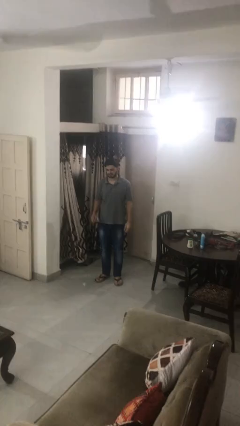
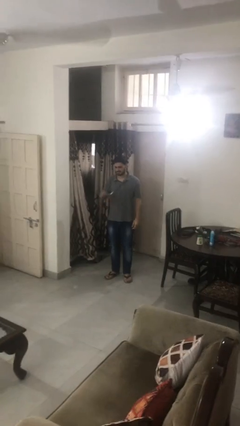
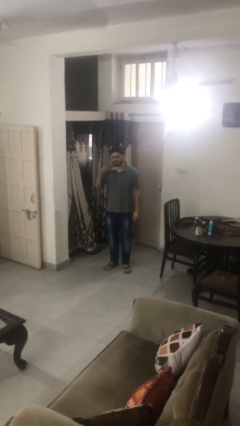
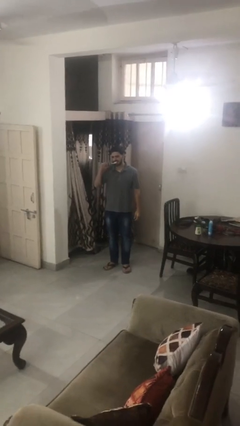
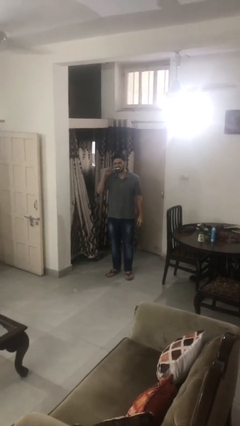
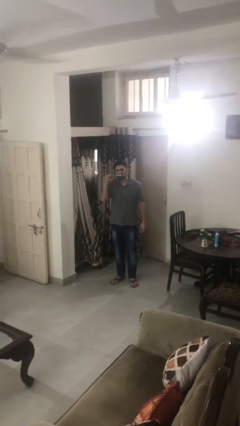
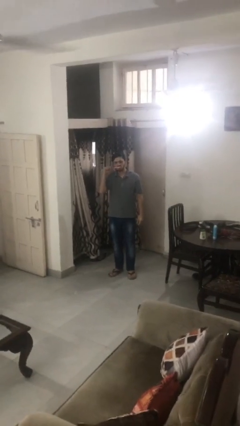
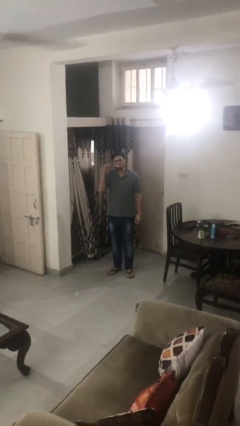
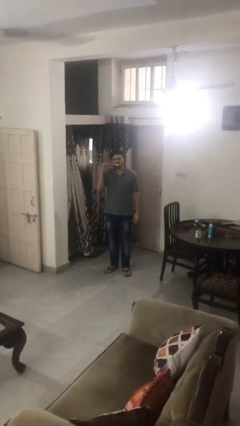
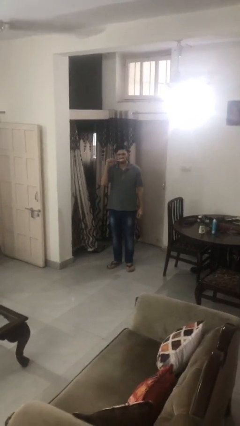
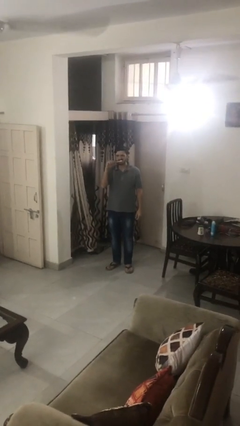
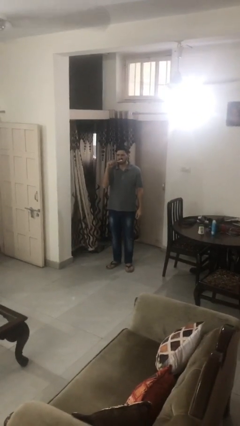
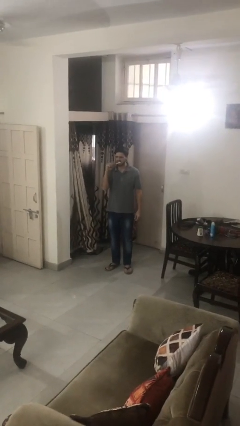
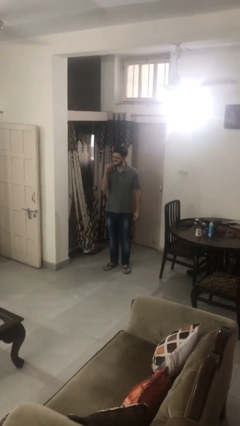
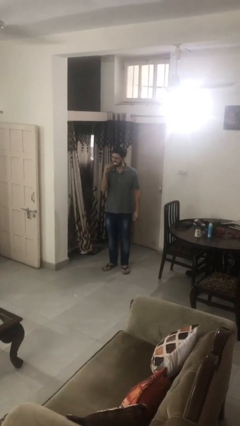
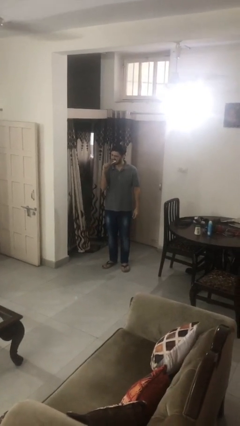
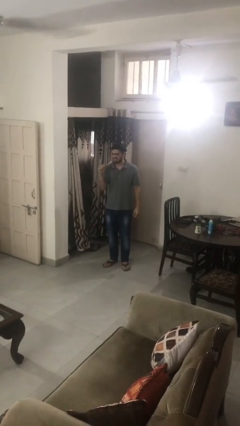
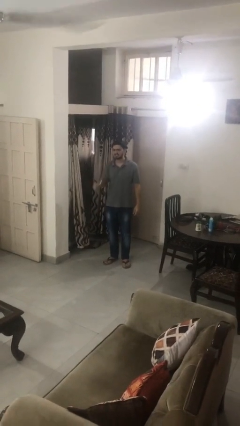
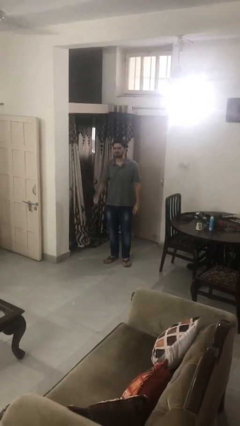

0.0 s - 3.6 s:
person brushes teeth

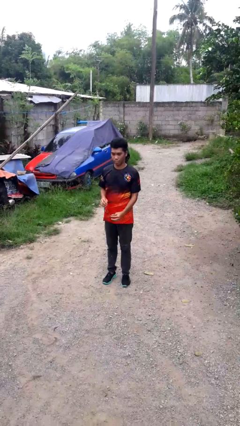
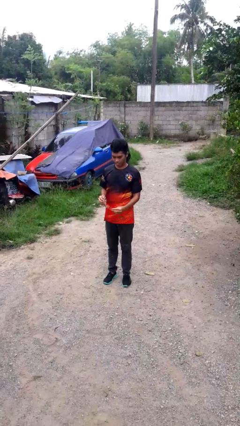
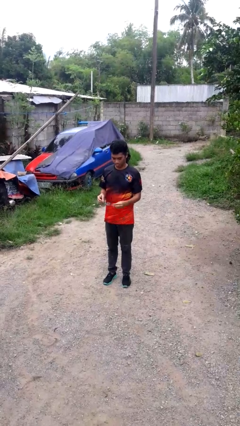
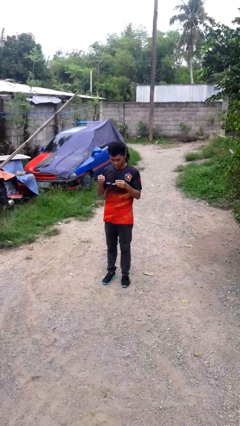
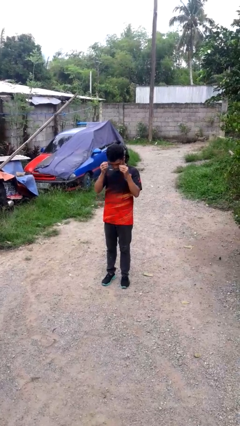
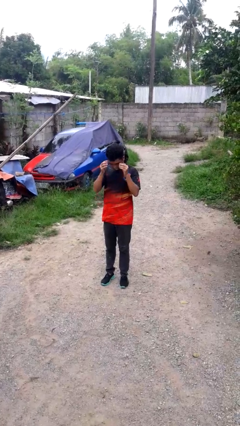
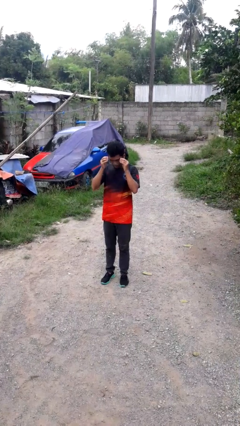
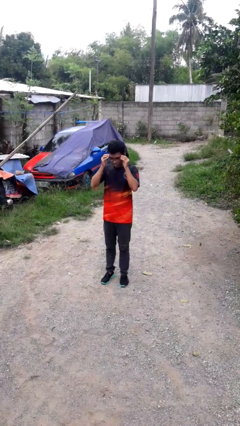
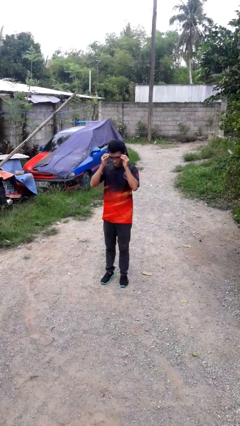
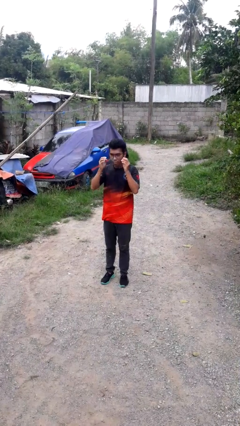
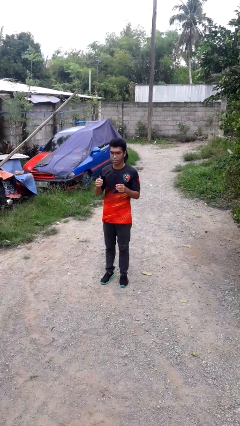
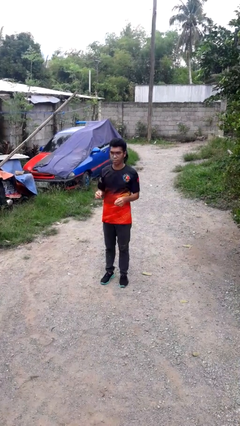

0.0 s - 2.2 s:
person puts on glasses

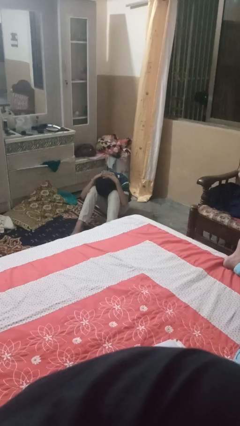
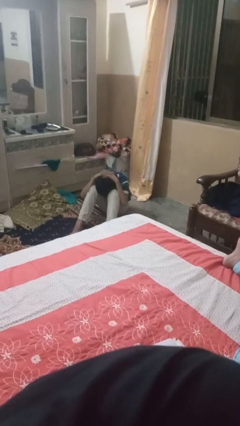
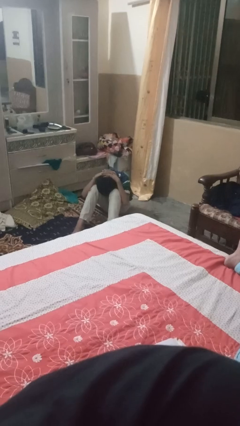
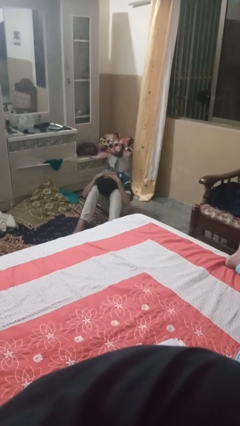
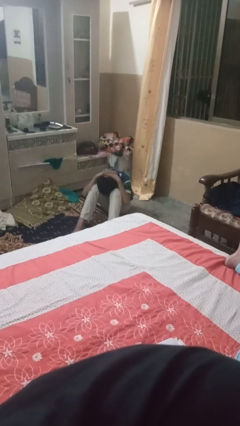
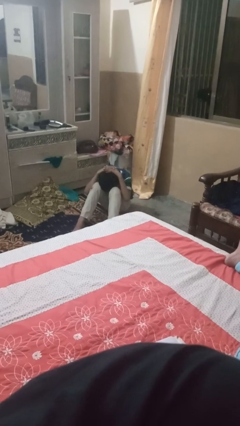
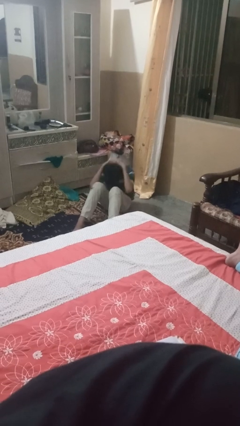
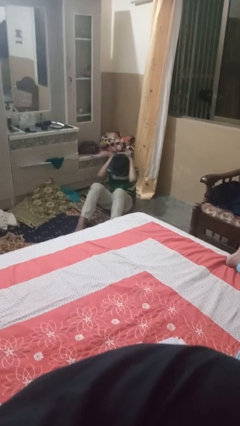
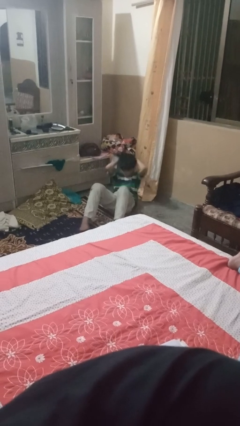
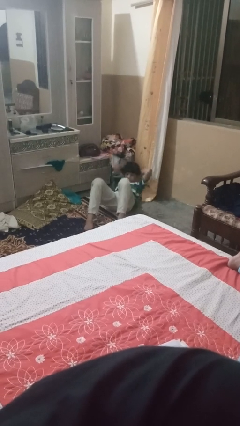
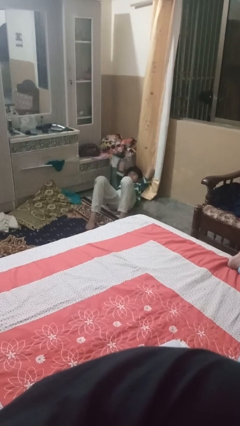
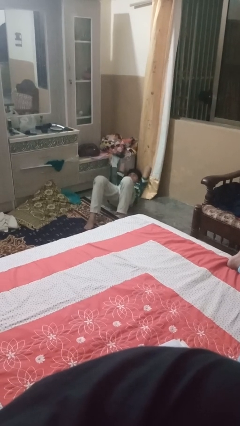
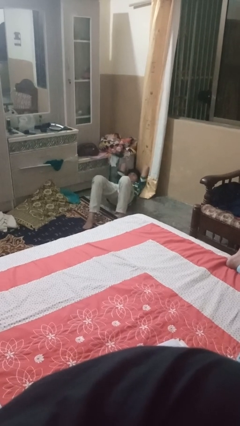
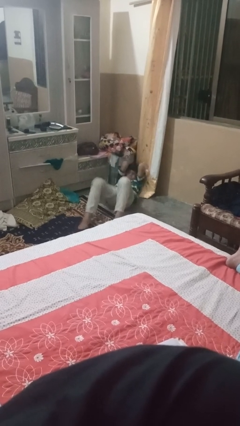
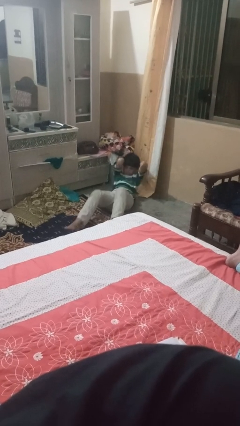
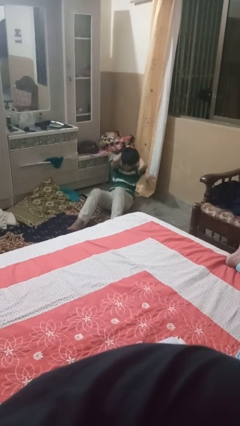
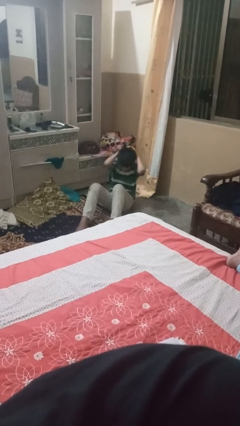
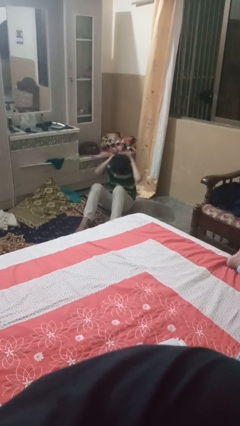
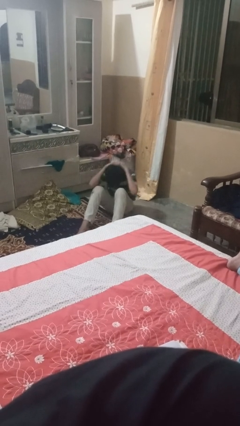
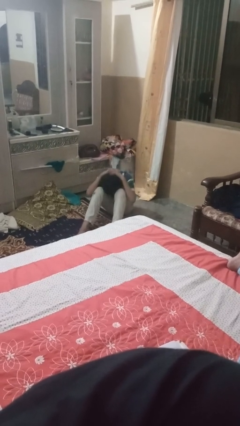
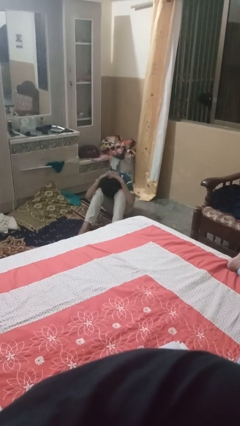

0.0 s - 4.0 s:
person exercises with situp

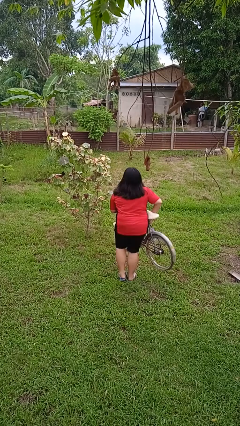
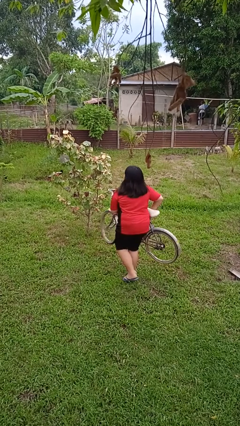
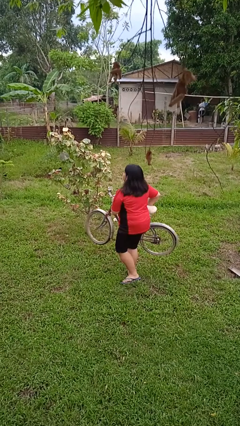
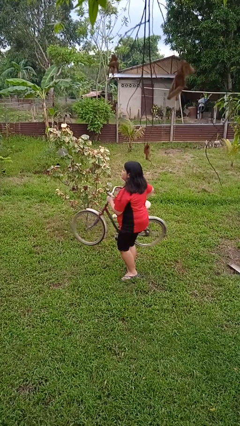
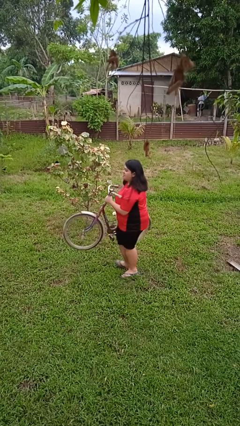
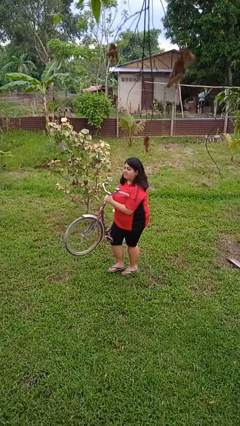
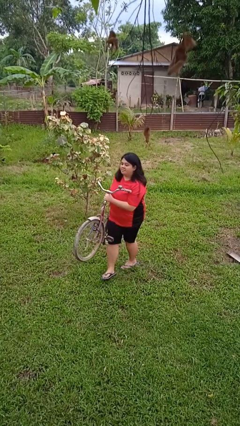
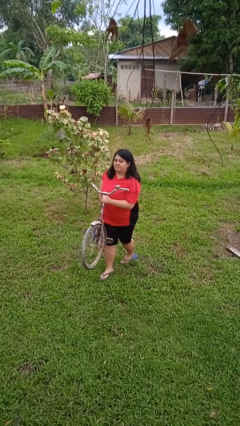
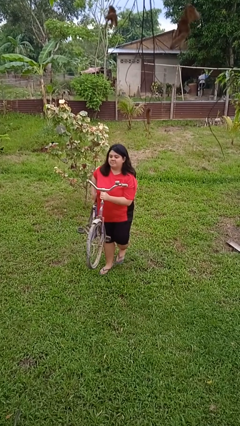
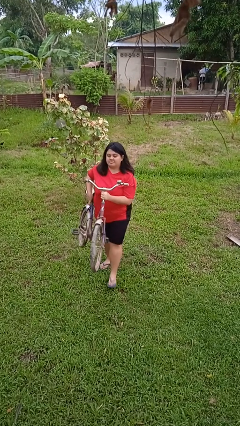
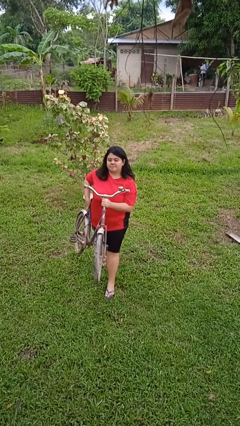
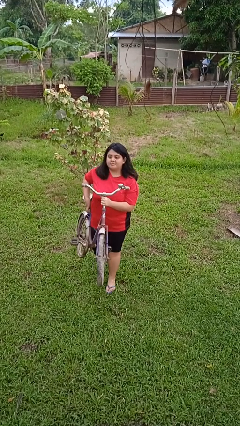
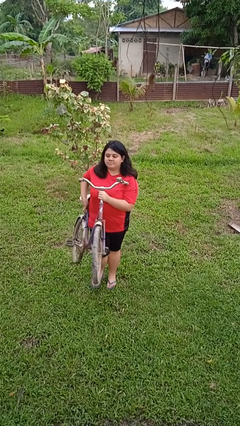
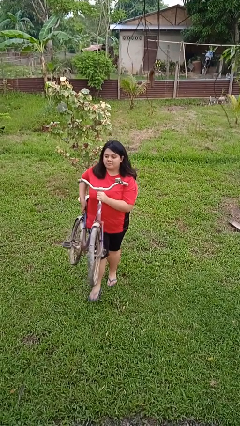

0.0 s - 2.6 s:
person carries bicycle

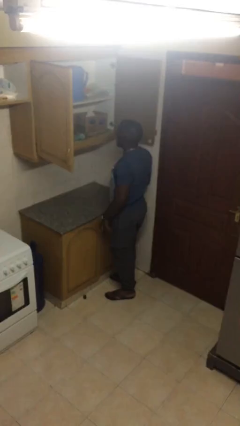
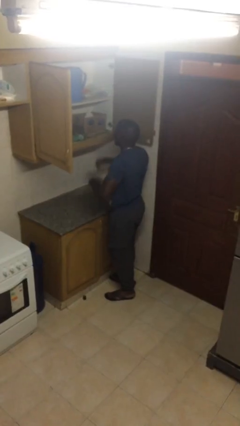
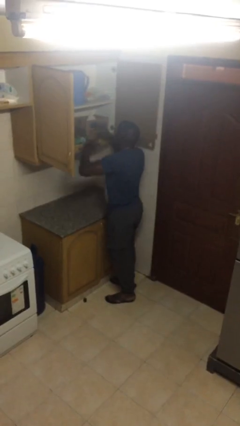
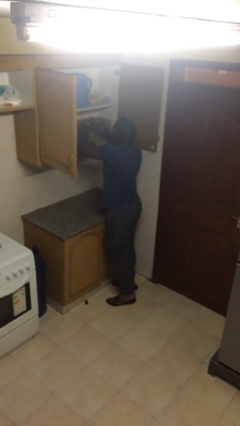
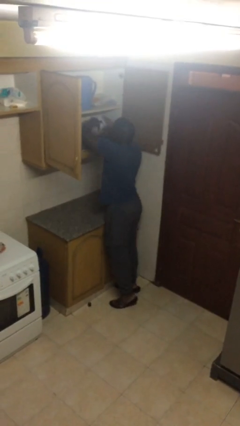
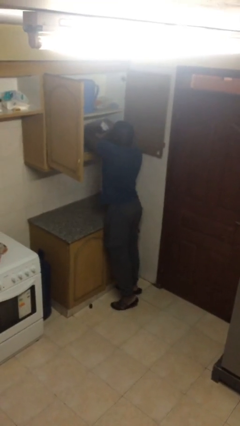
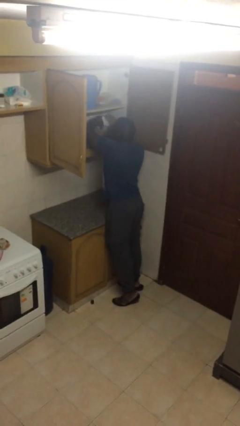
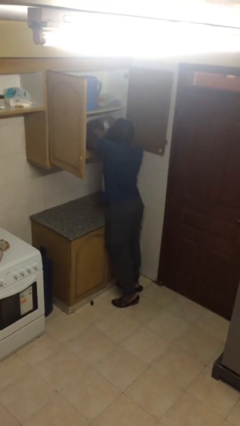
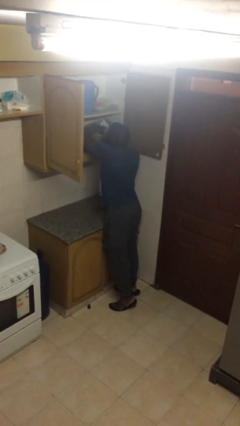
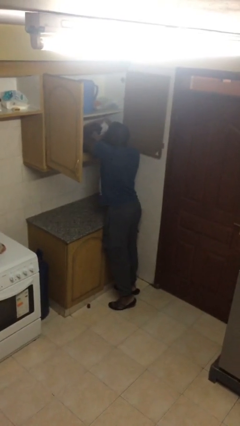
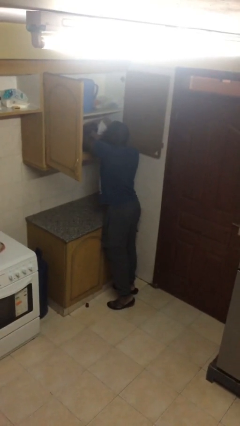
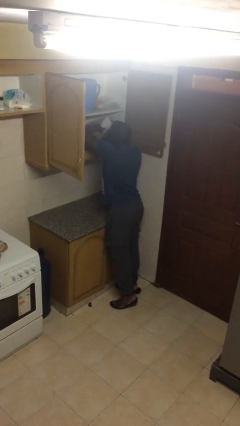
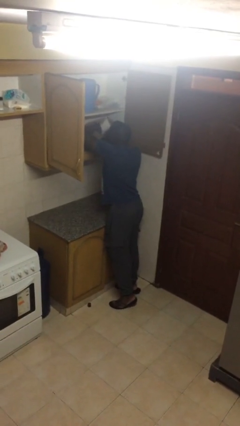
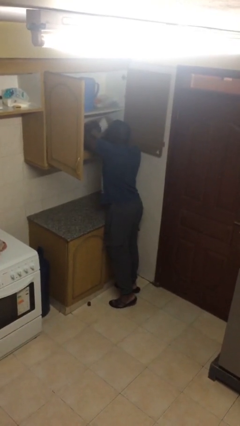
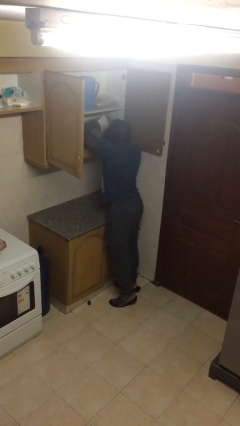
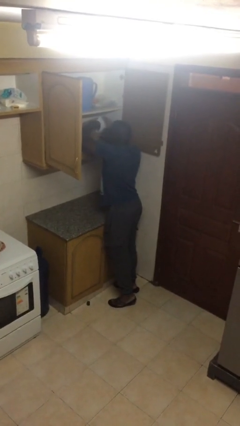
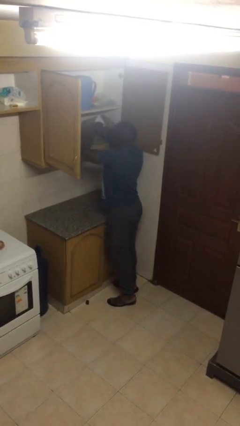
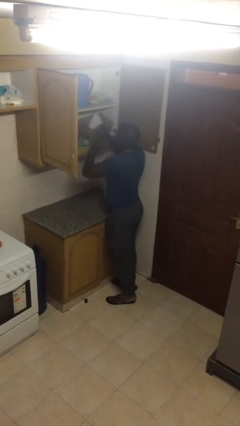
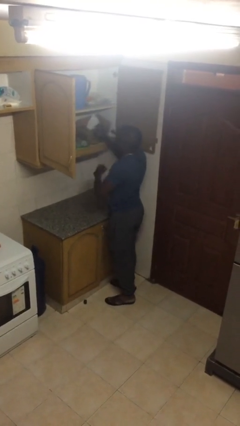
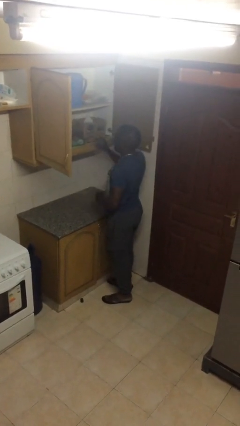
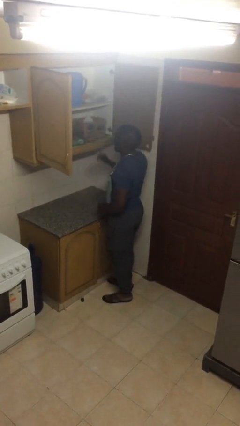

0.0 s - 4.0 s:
person searches in cabinet

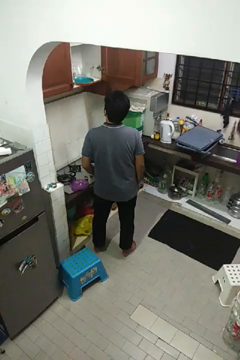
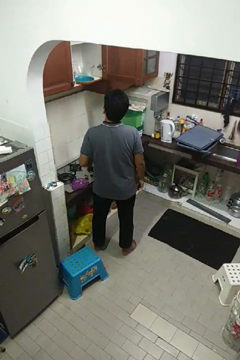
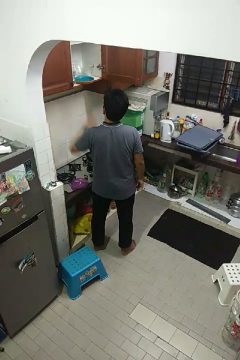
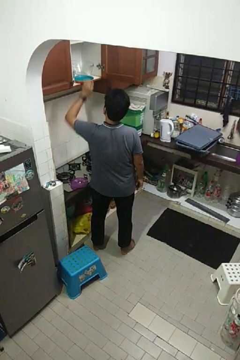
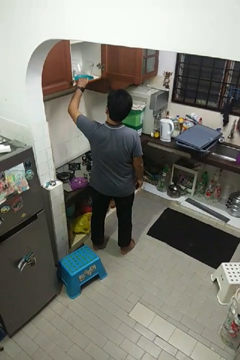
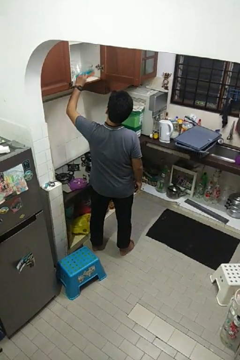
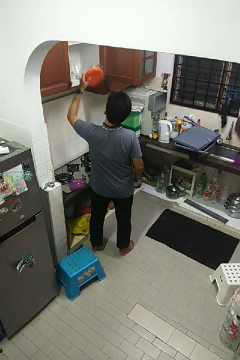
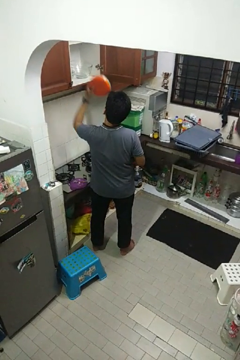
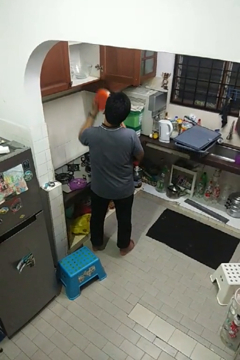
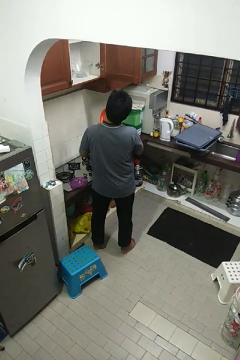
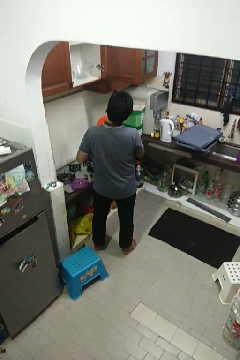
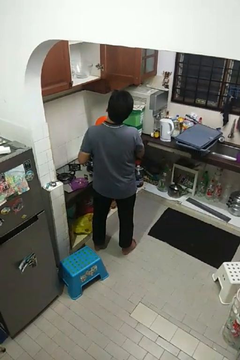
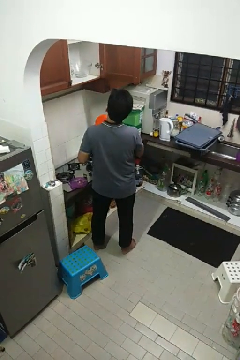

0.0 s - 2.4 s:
person takes object from cabinet
